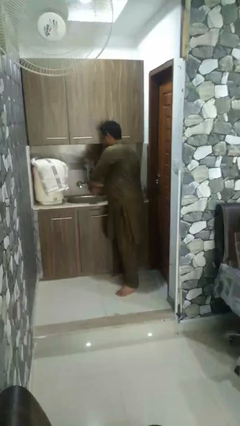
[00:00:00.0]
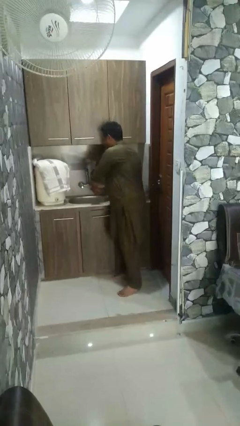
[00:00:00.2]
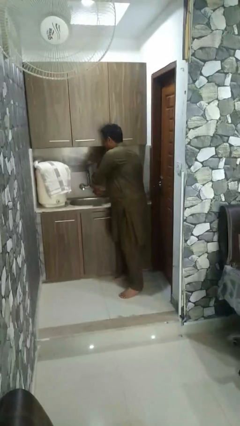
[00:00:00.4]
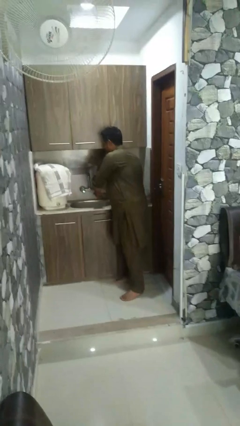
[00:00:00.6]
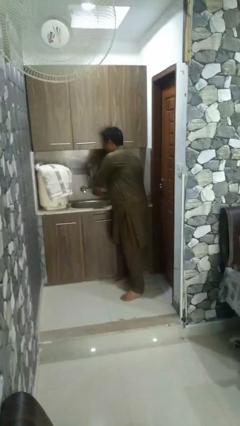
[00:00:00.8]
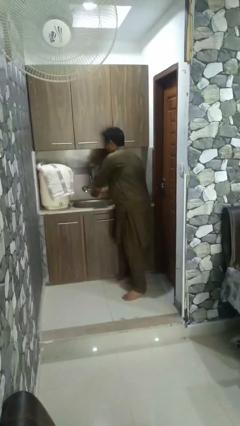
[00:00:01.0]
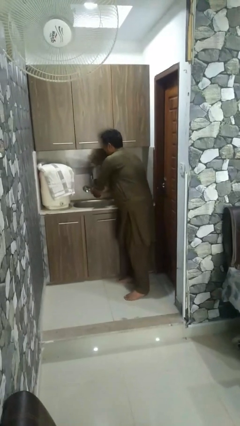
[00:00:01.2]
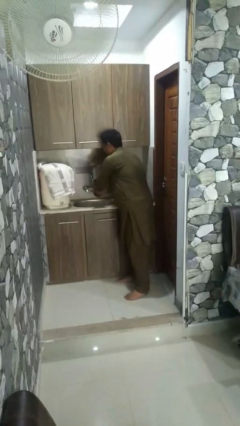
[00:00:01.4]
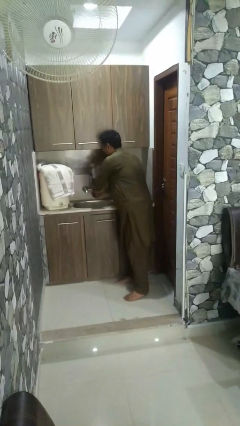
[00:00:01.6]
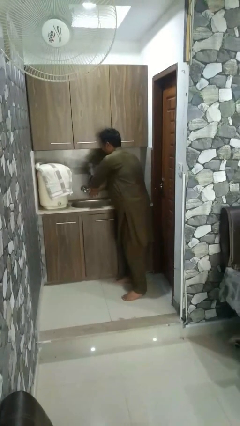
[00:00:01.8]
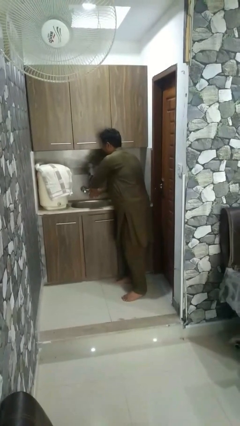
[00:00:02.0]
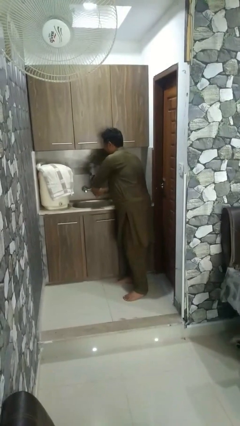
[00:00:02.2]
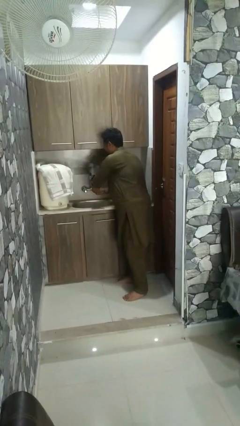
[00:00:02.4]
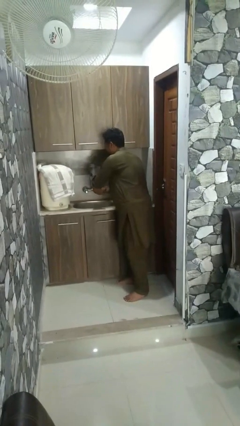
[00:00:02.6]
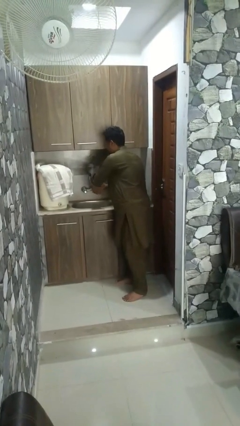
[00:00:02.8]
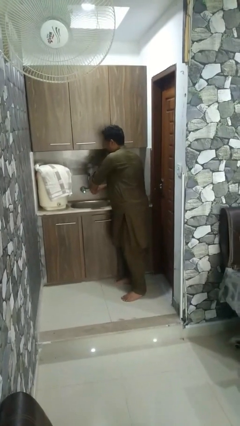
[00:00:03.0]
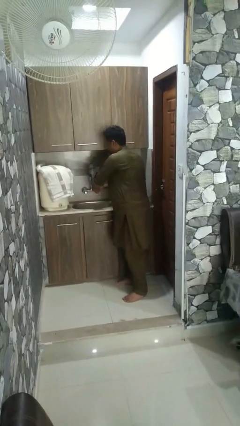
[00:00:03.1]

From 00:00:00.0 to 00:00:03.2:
person washes hands

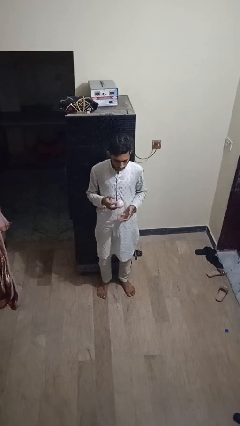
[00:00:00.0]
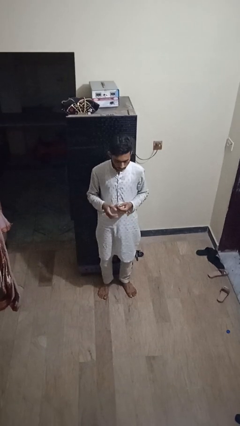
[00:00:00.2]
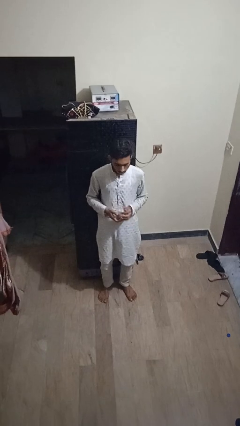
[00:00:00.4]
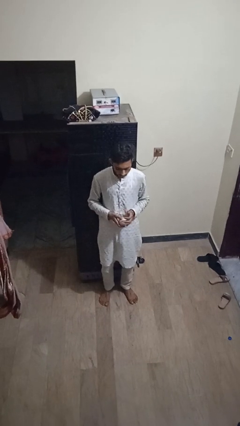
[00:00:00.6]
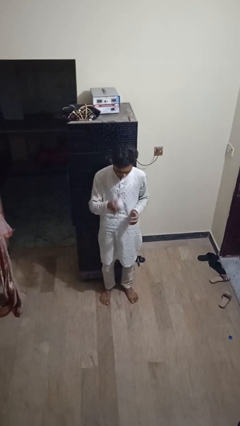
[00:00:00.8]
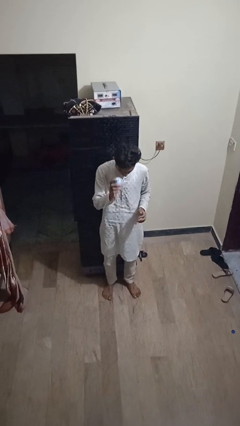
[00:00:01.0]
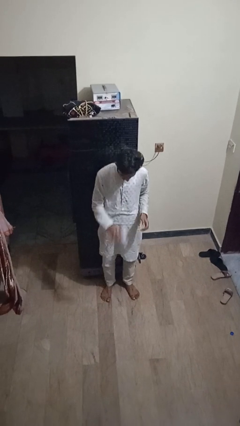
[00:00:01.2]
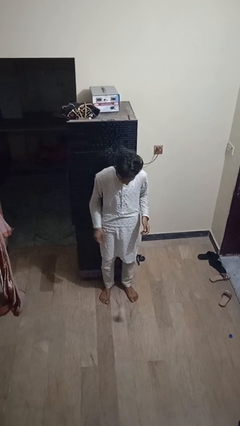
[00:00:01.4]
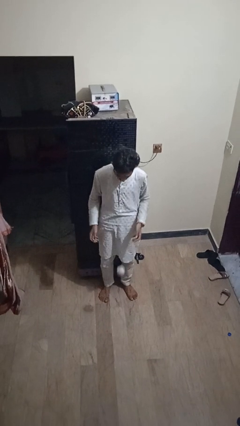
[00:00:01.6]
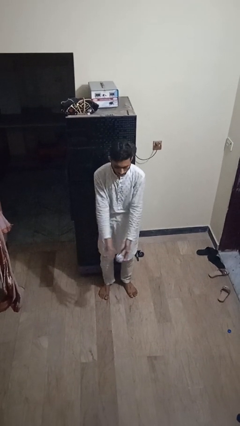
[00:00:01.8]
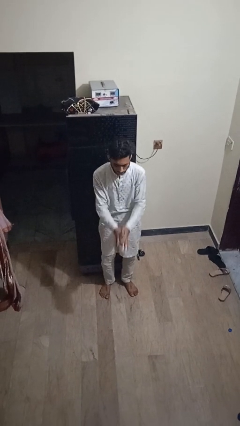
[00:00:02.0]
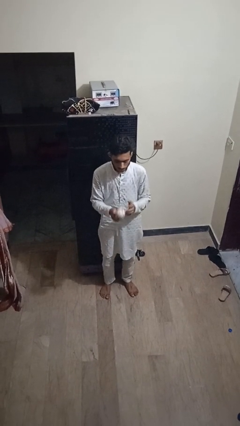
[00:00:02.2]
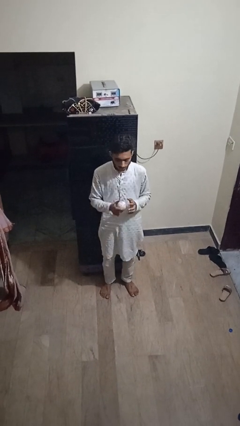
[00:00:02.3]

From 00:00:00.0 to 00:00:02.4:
person bounces ball on floor

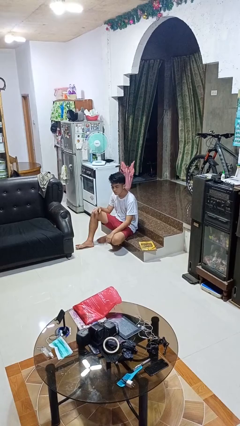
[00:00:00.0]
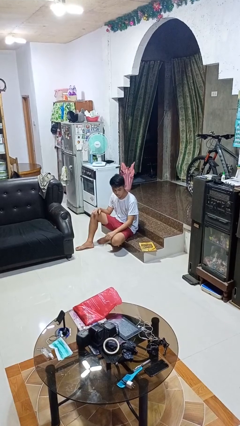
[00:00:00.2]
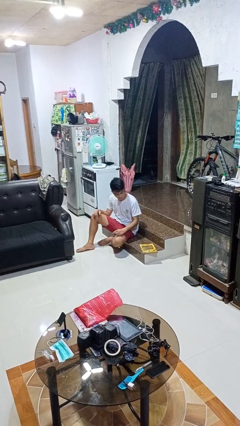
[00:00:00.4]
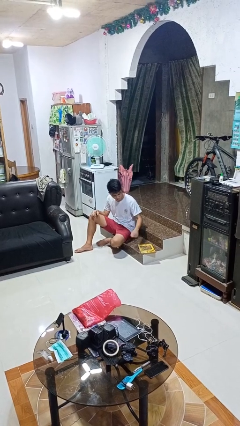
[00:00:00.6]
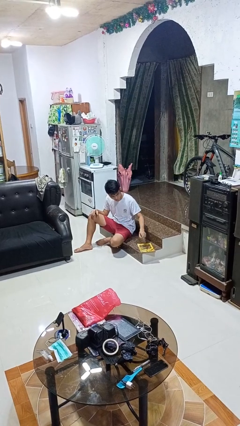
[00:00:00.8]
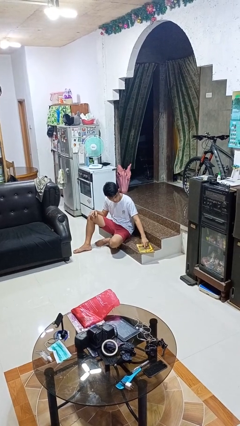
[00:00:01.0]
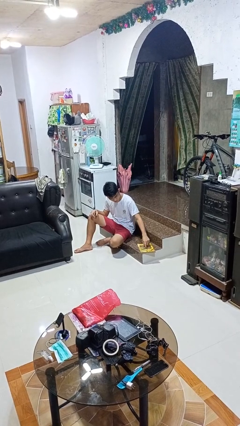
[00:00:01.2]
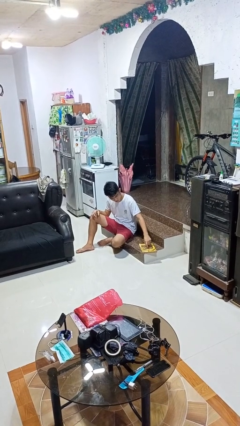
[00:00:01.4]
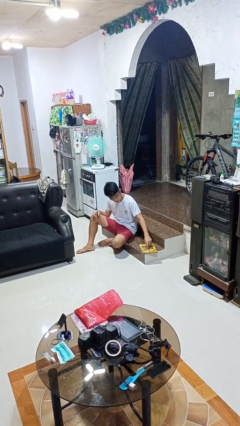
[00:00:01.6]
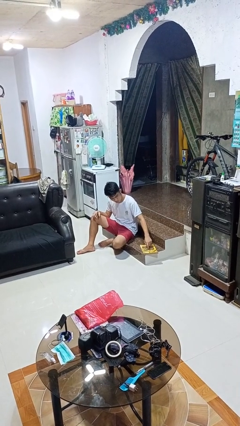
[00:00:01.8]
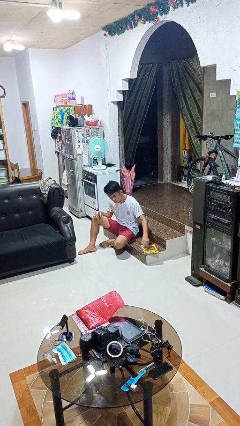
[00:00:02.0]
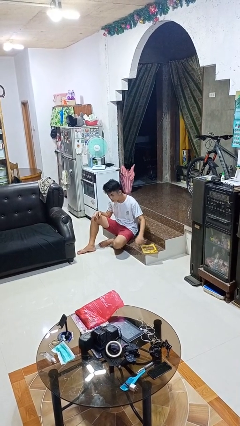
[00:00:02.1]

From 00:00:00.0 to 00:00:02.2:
person taps object with finger

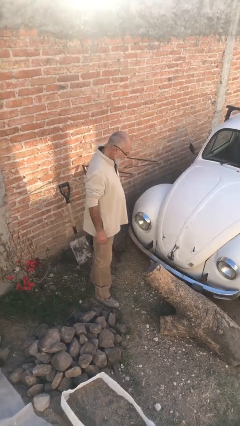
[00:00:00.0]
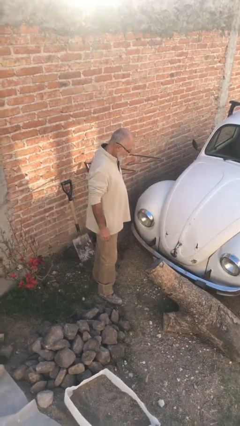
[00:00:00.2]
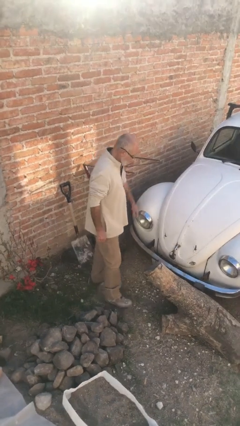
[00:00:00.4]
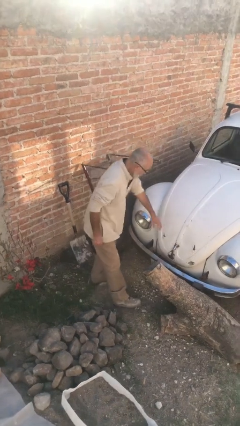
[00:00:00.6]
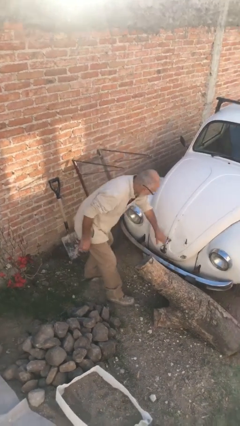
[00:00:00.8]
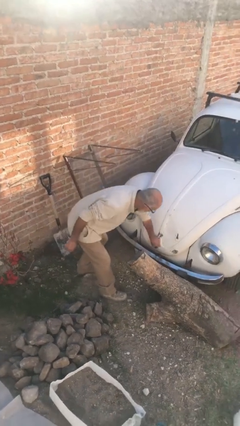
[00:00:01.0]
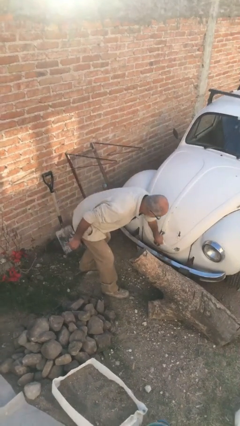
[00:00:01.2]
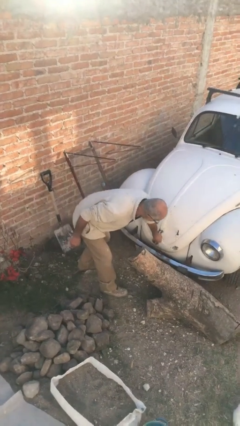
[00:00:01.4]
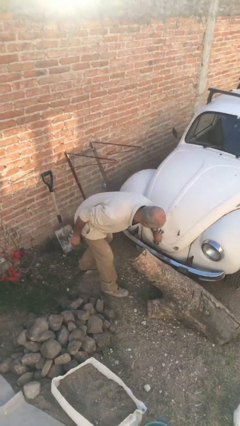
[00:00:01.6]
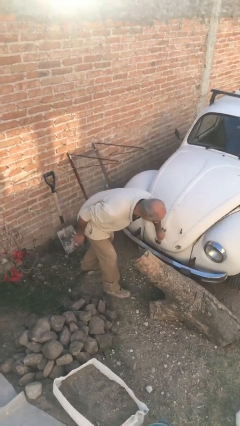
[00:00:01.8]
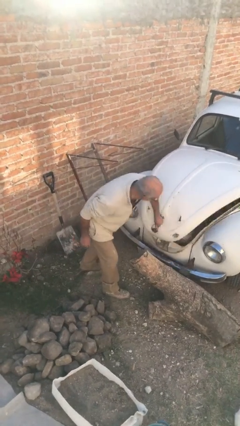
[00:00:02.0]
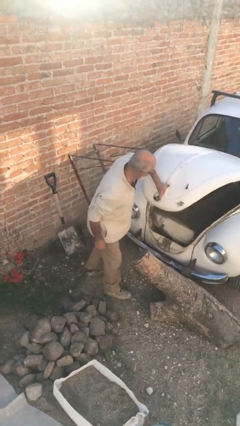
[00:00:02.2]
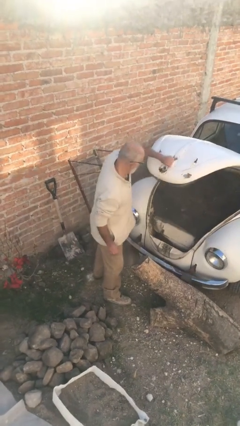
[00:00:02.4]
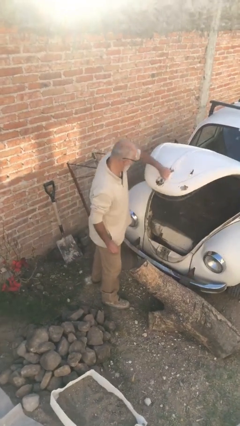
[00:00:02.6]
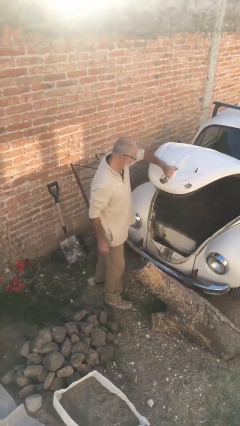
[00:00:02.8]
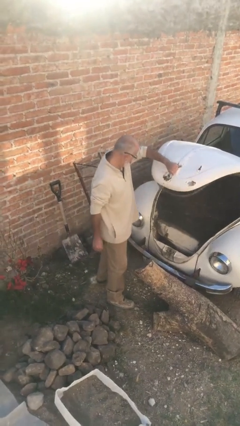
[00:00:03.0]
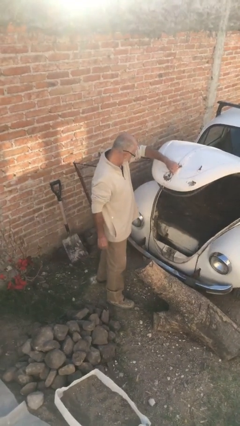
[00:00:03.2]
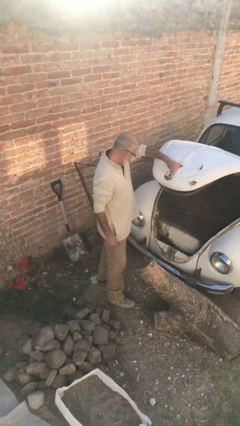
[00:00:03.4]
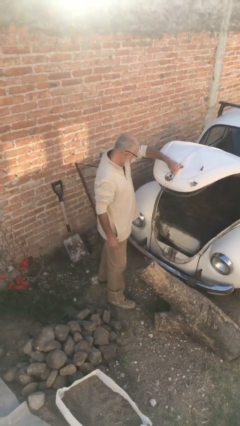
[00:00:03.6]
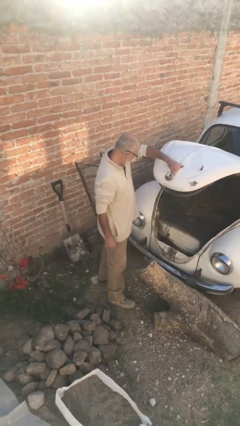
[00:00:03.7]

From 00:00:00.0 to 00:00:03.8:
person opens car trunk

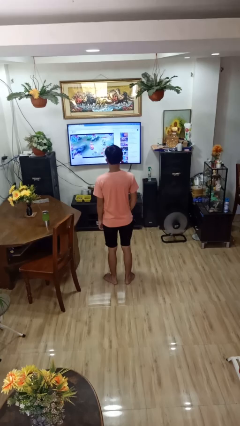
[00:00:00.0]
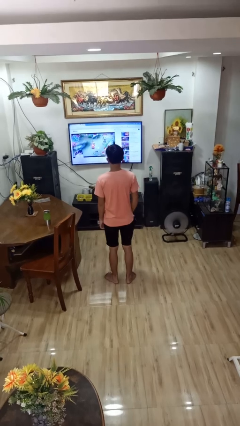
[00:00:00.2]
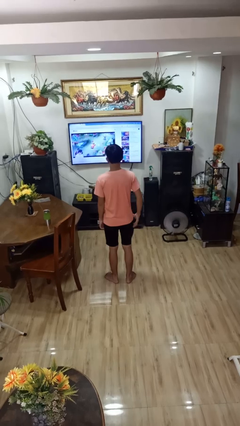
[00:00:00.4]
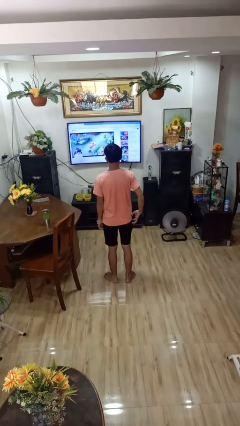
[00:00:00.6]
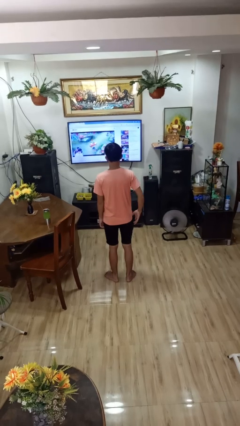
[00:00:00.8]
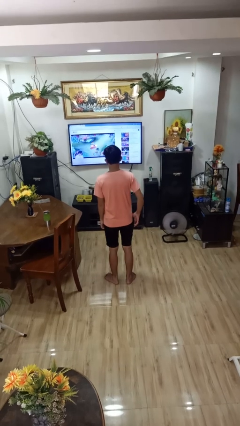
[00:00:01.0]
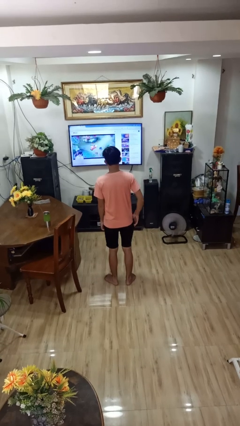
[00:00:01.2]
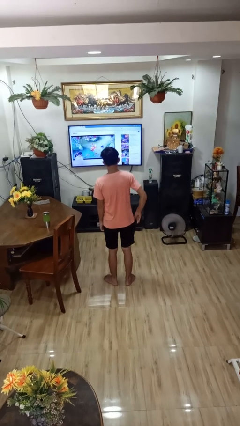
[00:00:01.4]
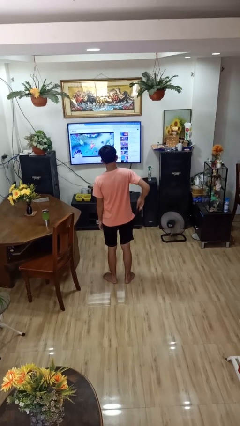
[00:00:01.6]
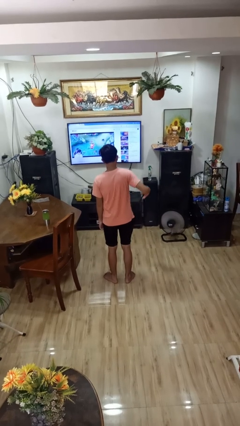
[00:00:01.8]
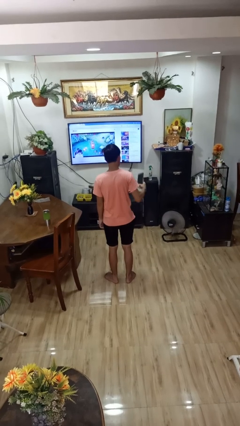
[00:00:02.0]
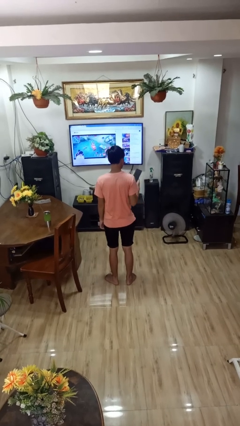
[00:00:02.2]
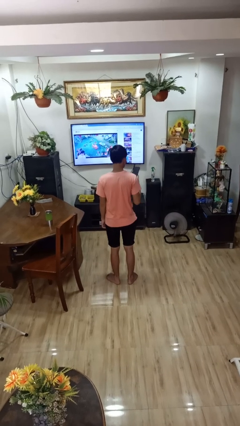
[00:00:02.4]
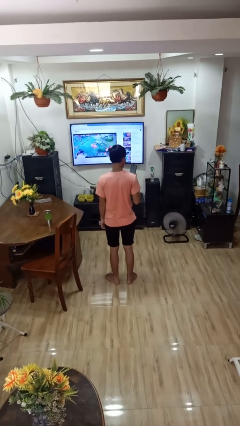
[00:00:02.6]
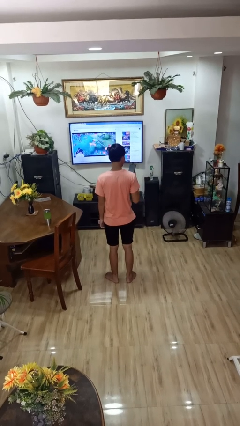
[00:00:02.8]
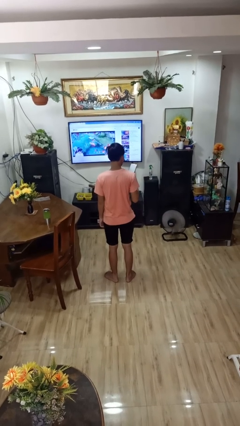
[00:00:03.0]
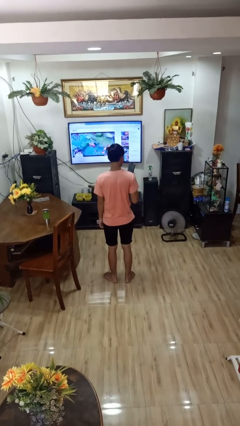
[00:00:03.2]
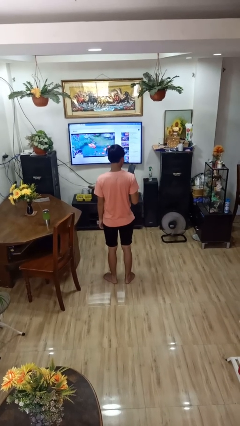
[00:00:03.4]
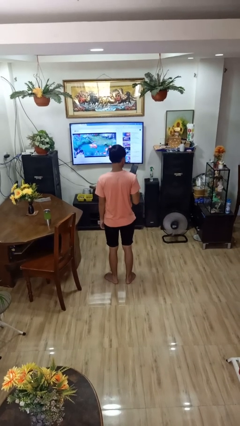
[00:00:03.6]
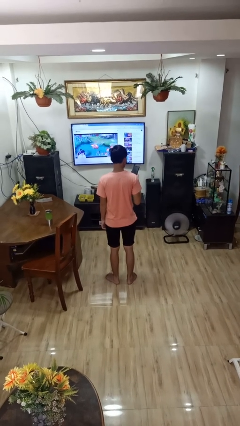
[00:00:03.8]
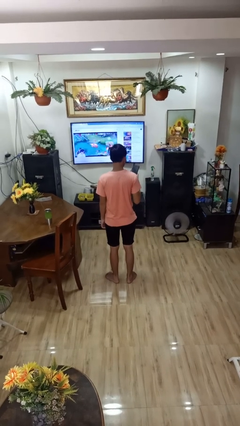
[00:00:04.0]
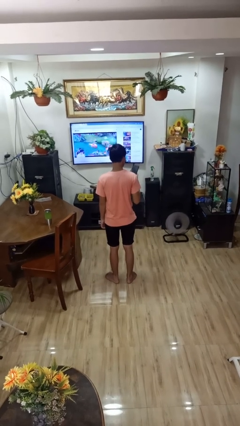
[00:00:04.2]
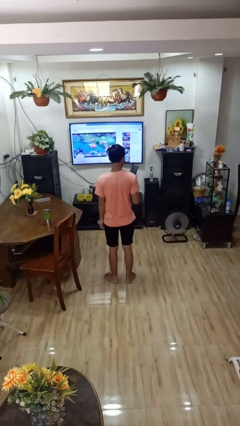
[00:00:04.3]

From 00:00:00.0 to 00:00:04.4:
person takes phone from pocket

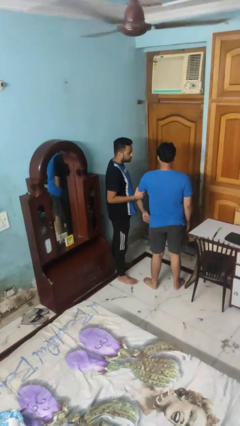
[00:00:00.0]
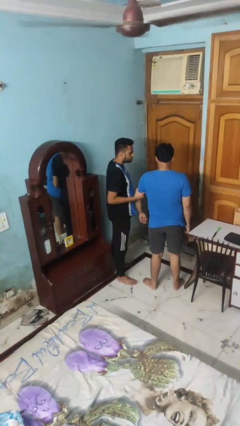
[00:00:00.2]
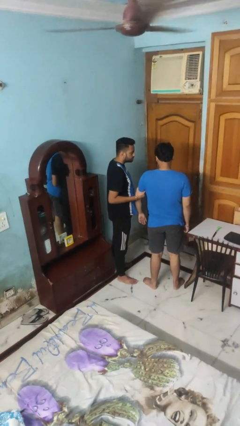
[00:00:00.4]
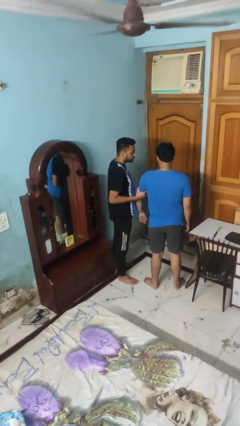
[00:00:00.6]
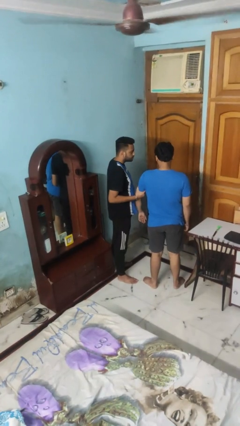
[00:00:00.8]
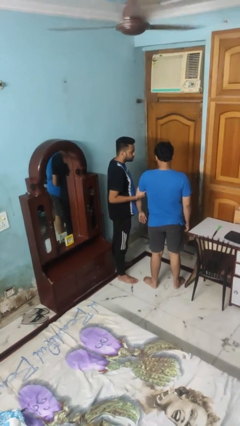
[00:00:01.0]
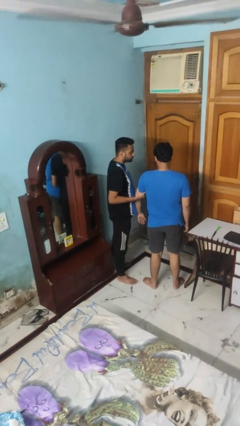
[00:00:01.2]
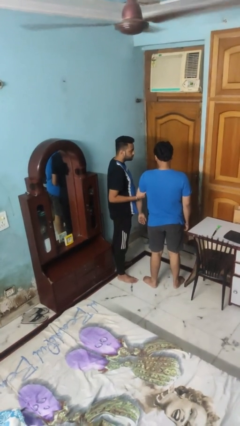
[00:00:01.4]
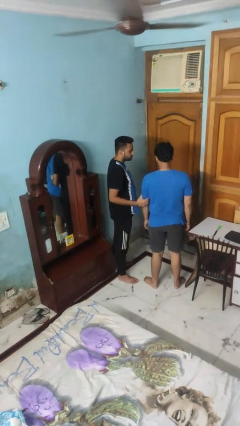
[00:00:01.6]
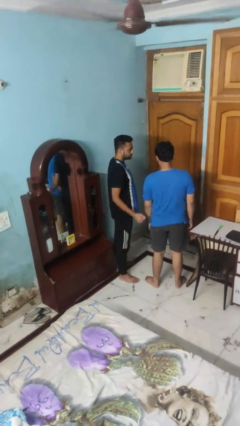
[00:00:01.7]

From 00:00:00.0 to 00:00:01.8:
person grabs person by bicep
